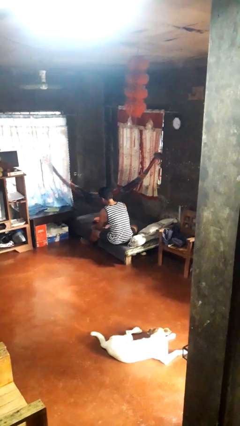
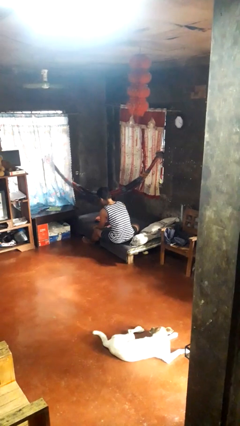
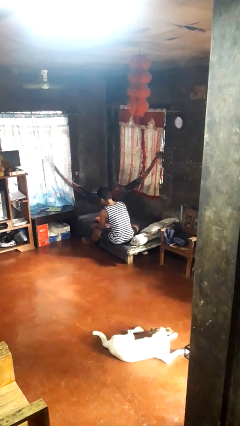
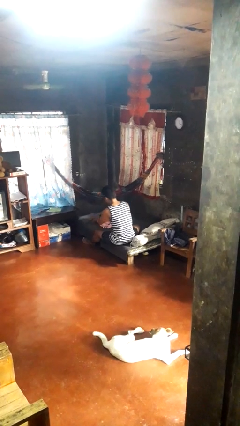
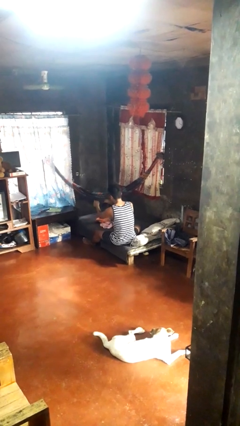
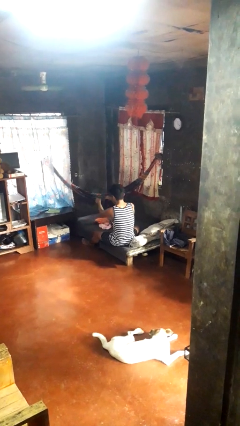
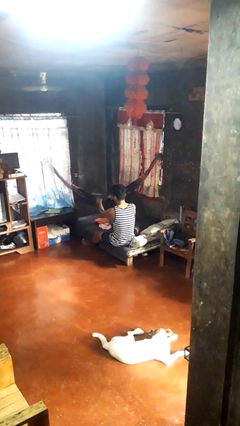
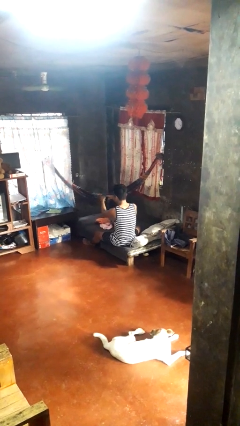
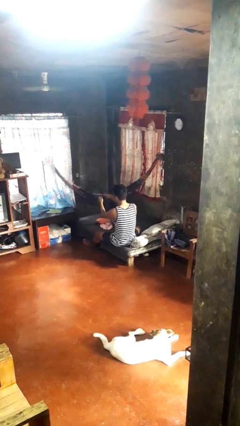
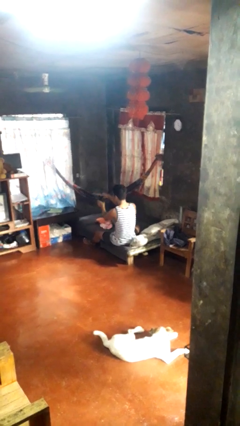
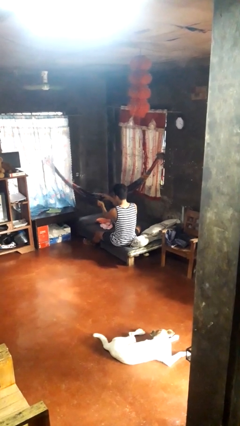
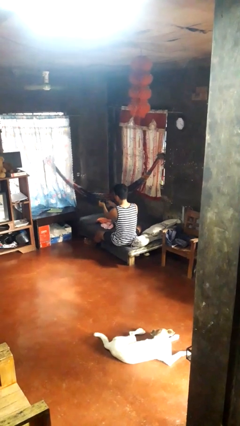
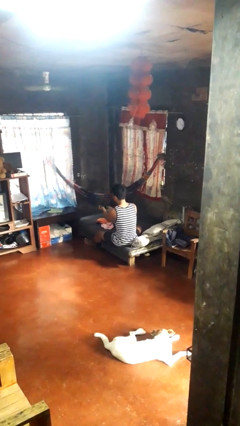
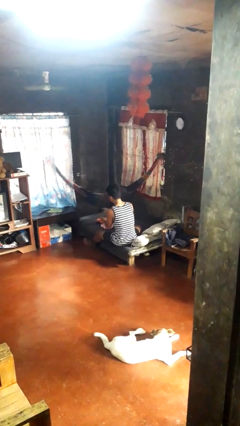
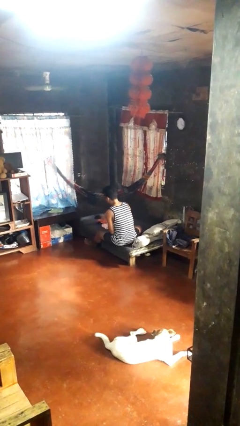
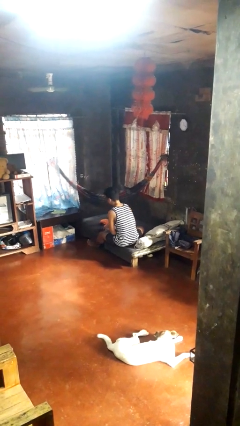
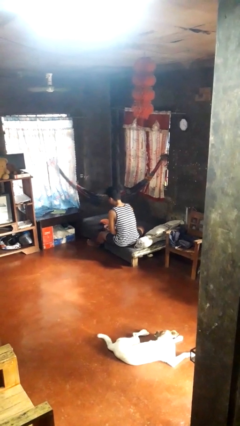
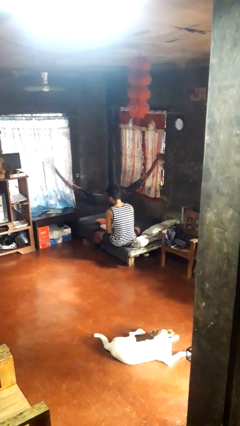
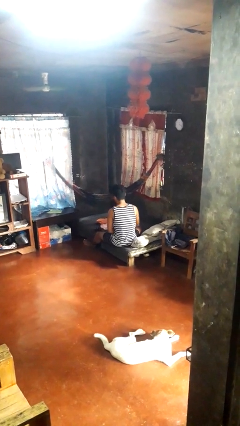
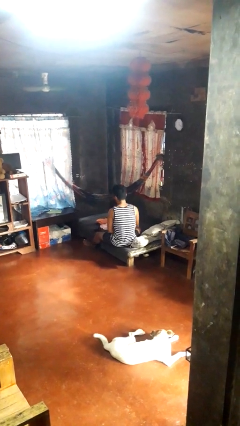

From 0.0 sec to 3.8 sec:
person folds socks

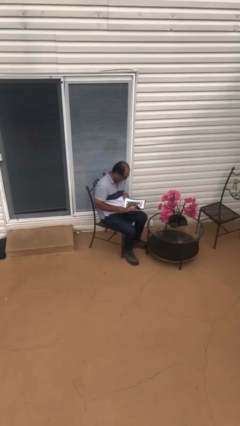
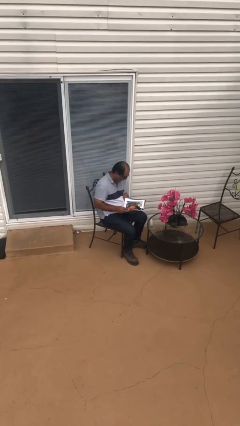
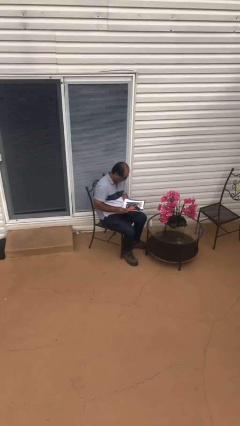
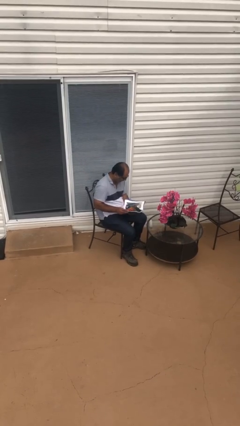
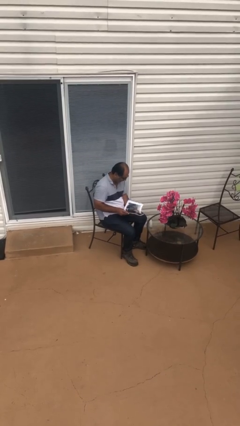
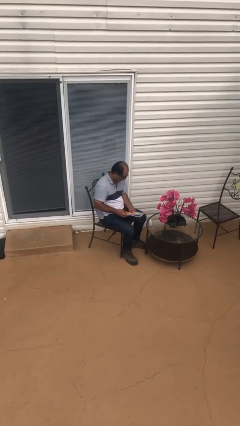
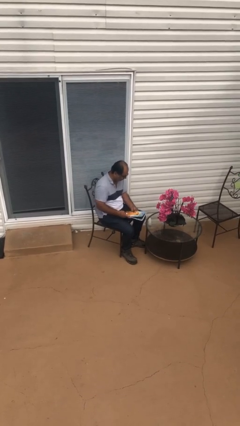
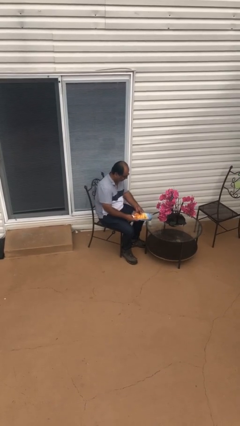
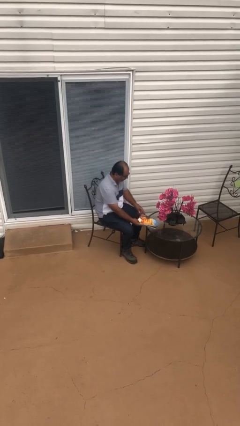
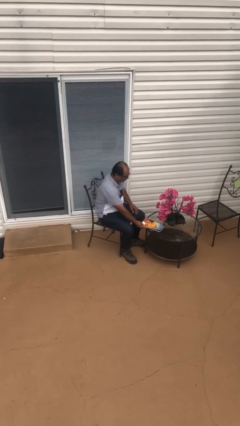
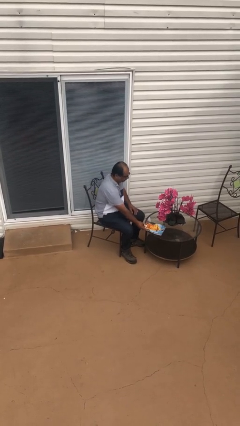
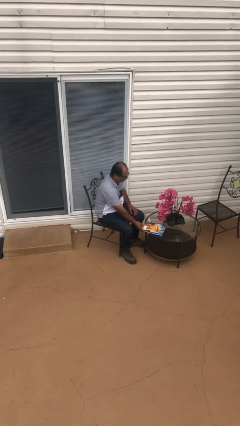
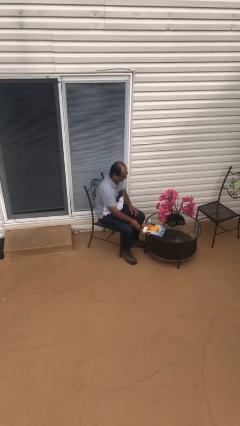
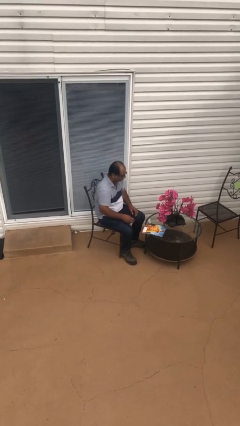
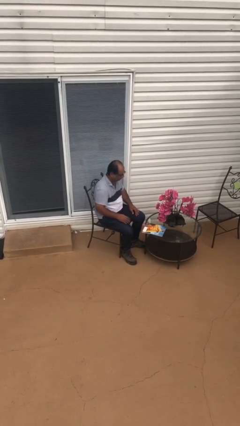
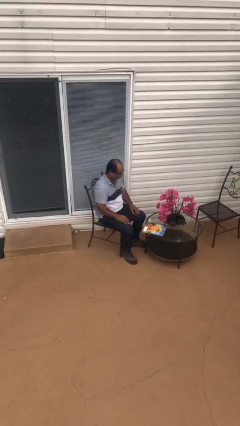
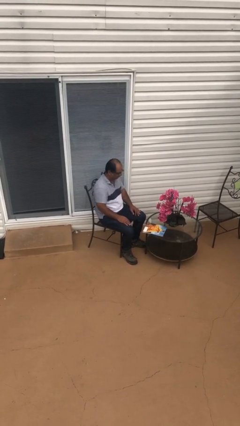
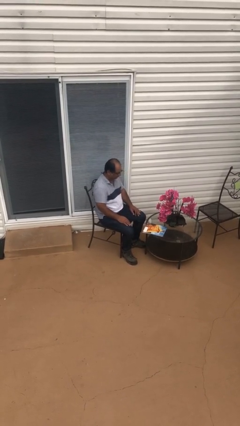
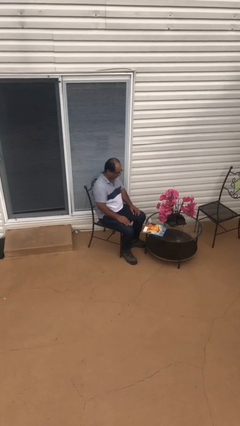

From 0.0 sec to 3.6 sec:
person puts down object on table

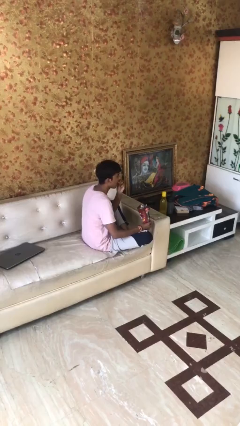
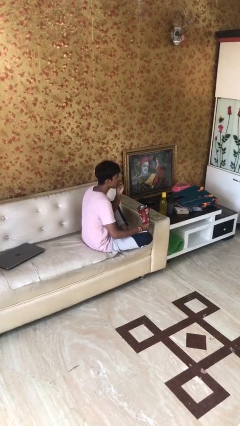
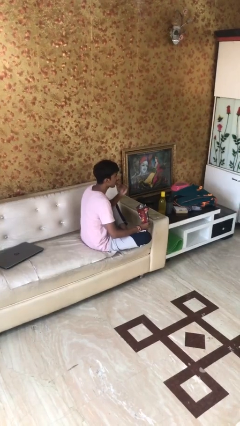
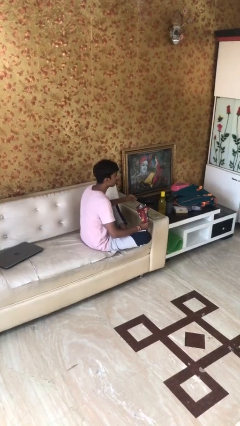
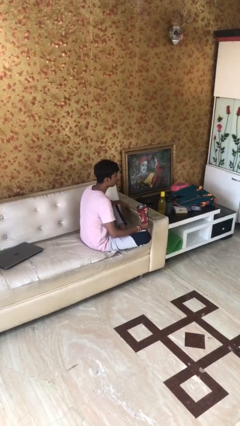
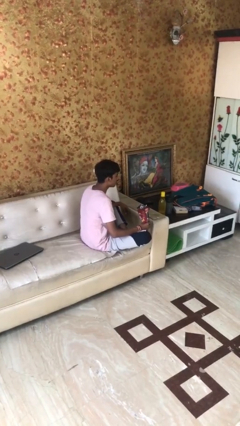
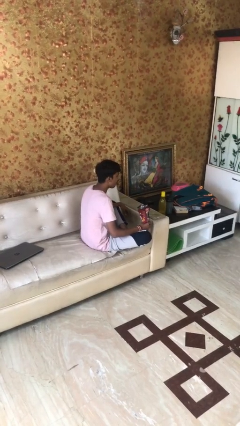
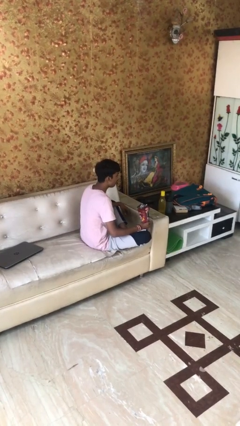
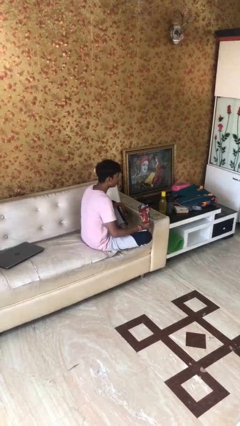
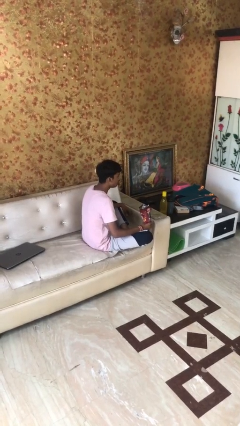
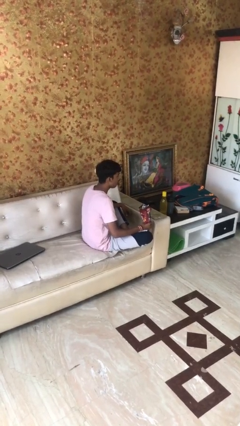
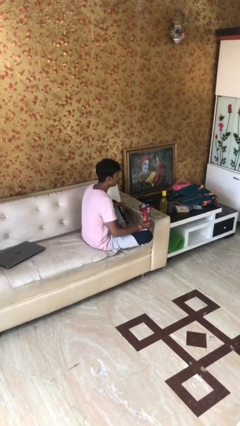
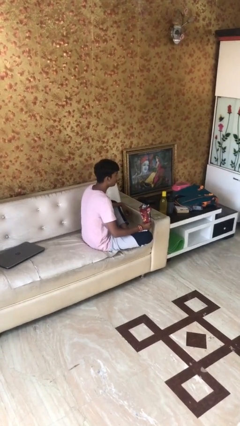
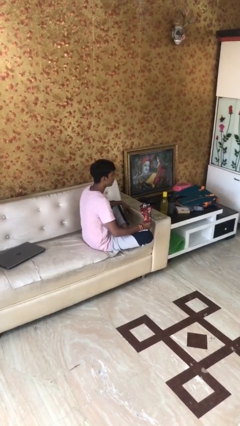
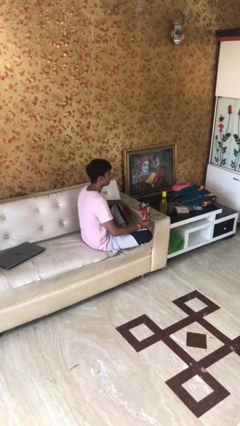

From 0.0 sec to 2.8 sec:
person eats snack from bag

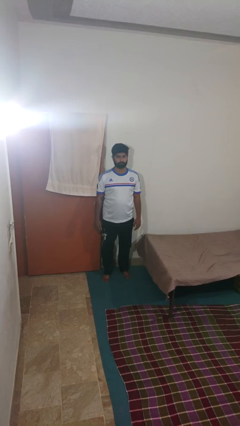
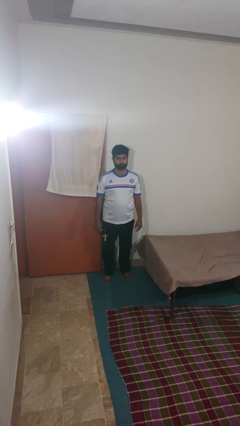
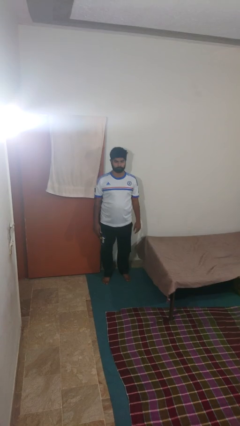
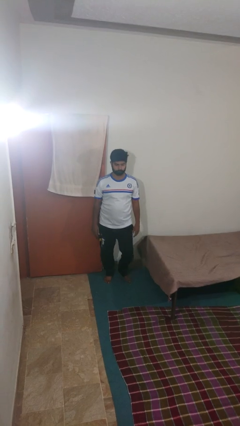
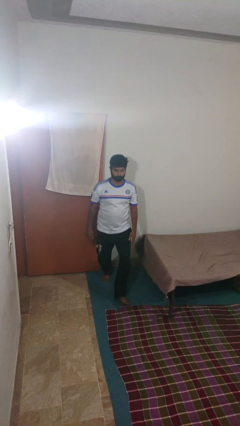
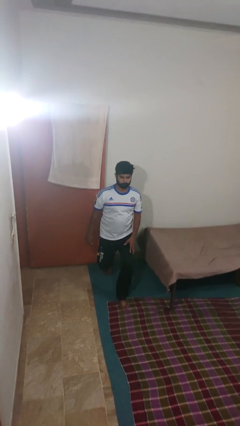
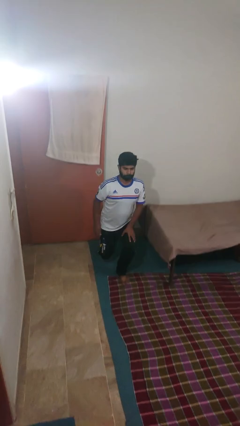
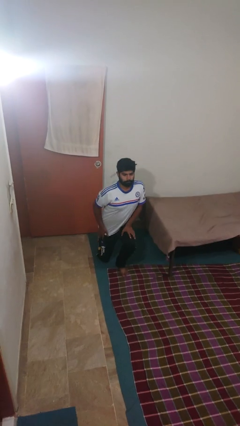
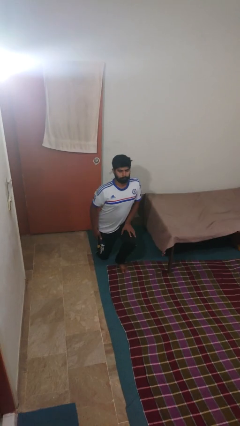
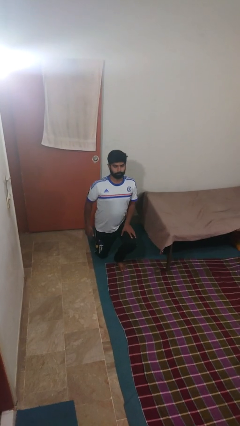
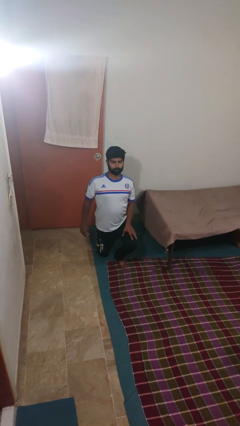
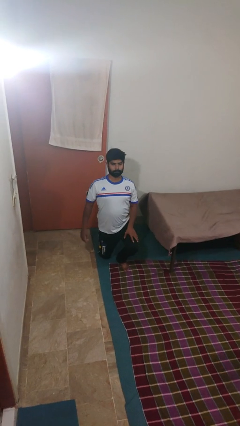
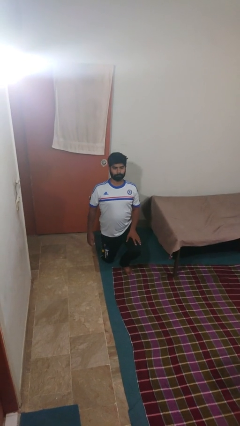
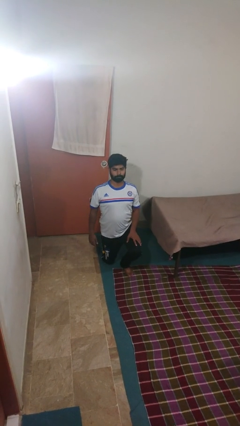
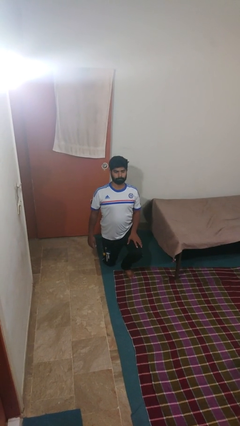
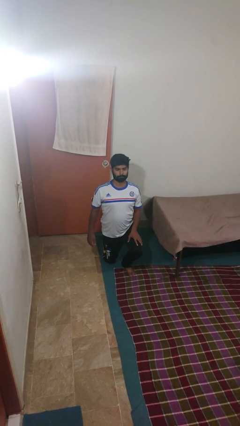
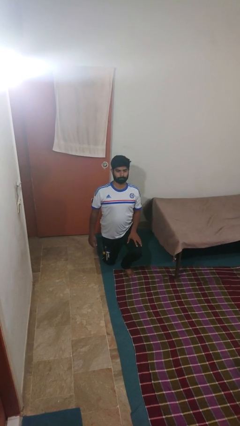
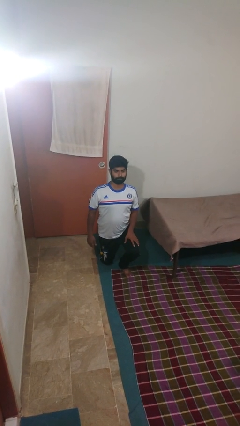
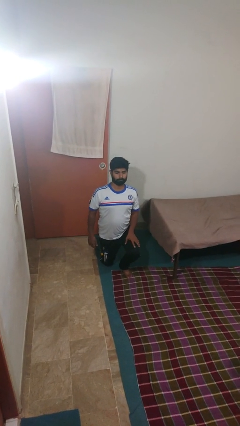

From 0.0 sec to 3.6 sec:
person kneels

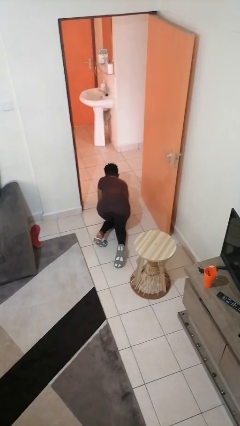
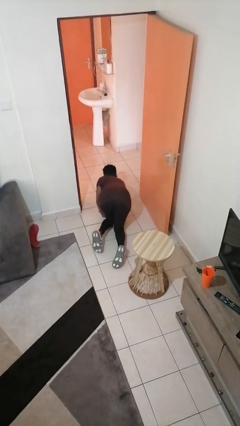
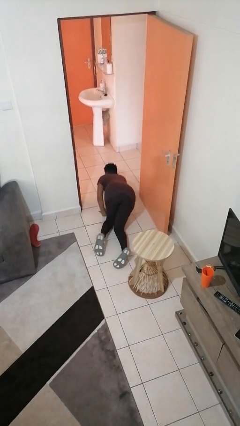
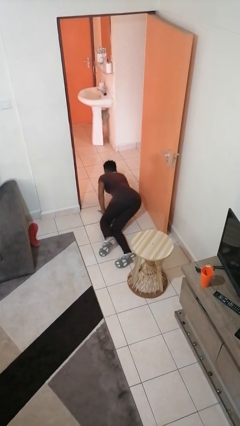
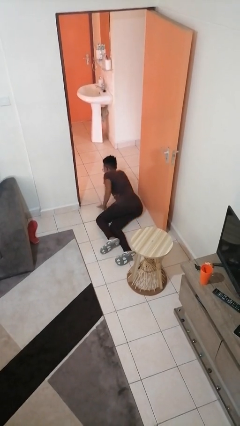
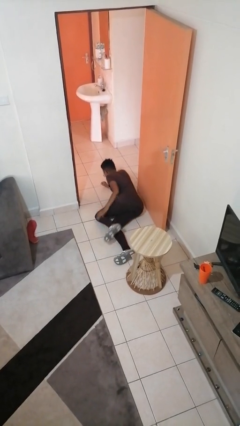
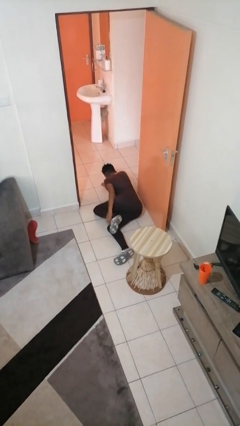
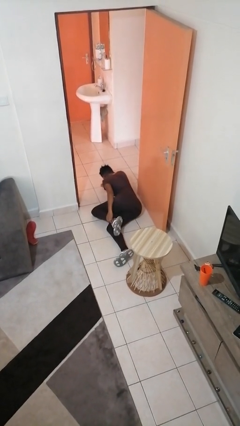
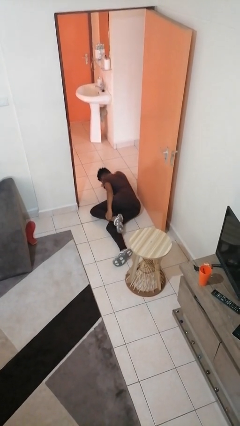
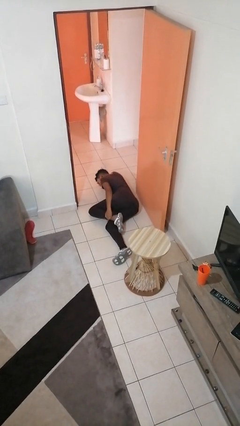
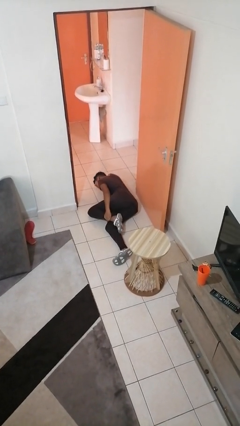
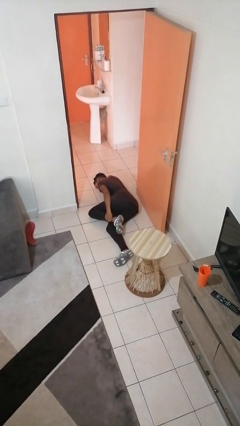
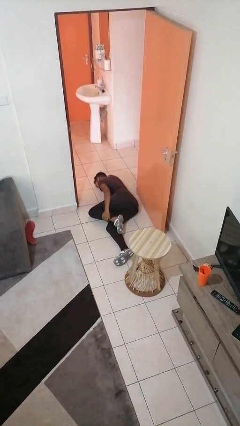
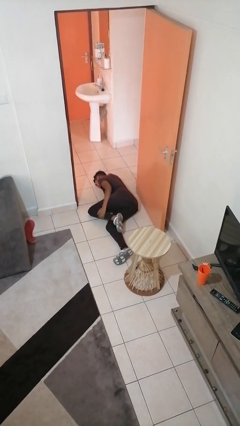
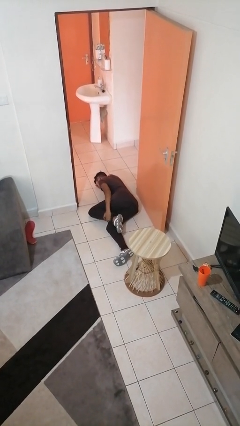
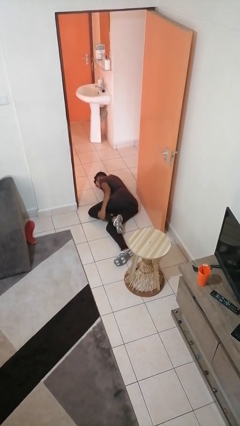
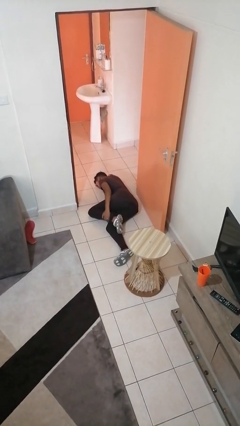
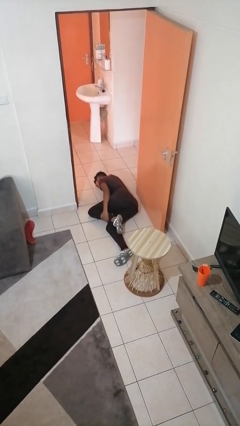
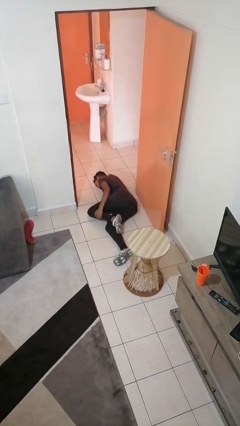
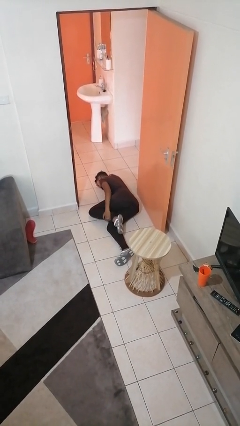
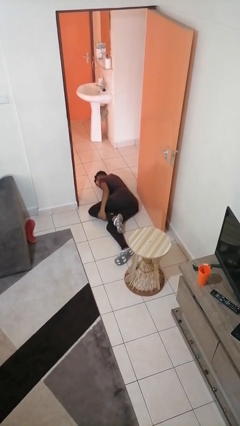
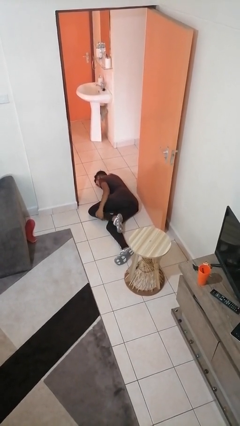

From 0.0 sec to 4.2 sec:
person lies down on floor
